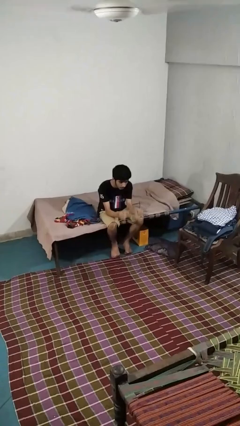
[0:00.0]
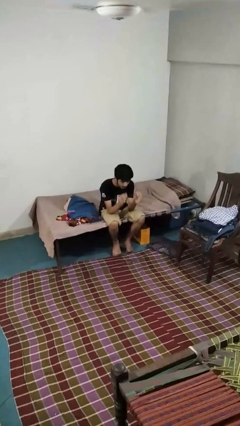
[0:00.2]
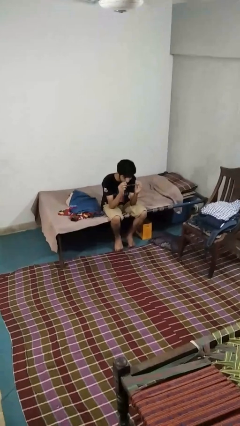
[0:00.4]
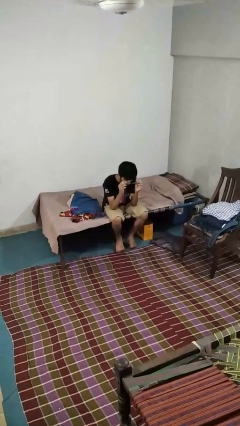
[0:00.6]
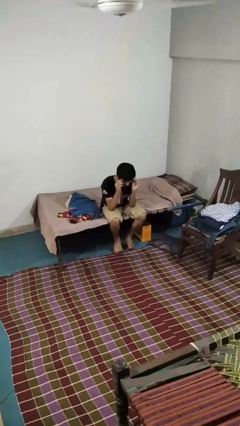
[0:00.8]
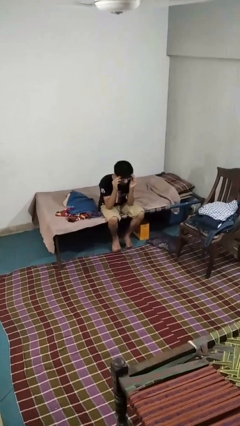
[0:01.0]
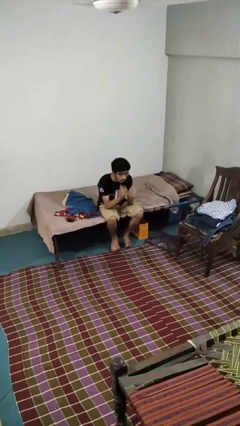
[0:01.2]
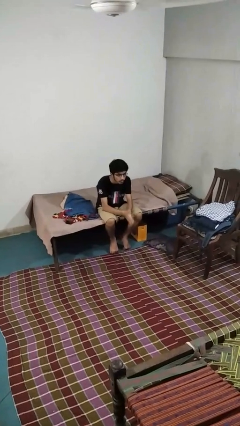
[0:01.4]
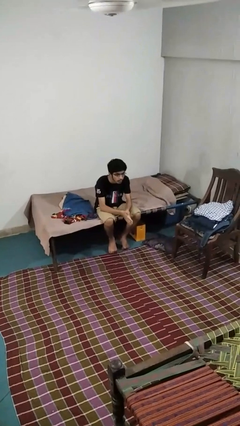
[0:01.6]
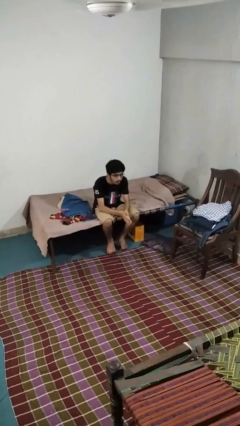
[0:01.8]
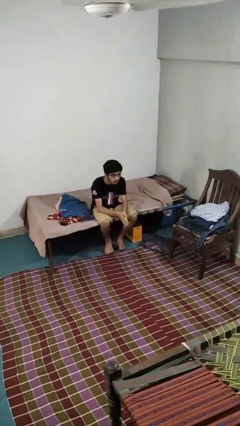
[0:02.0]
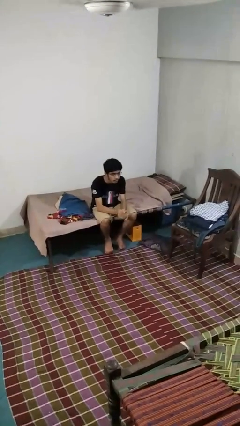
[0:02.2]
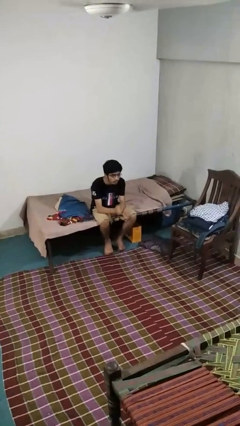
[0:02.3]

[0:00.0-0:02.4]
person puts on glasses

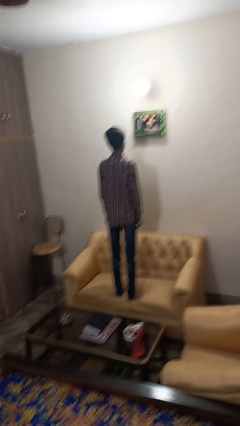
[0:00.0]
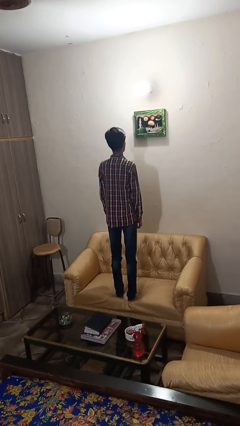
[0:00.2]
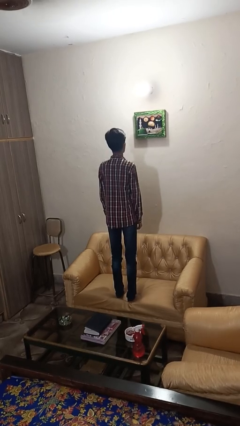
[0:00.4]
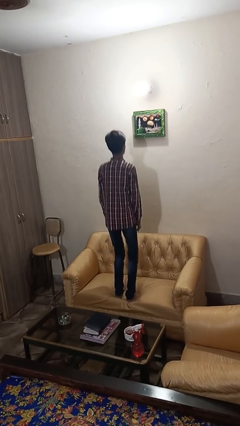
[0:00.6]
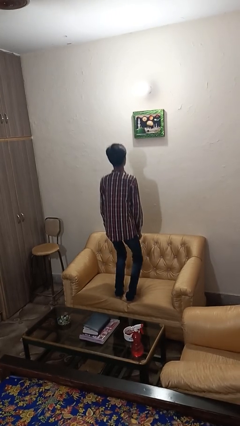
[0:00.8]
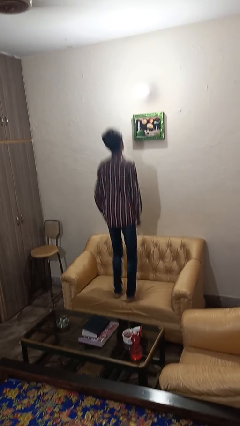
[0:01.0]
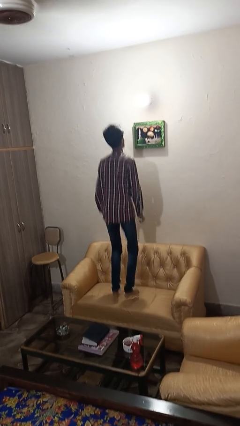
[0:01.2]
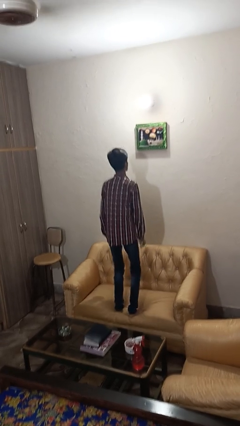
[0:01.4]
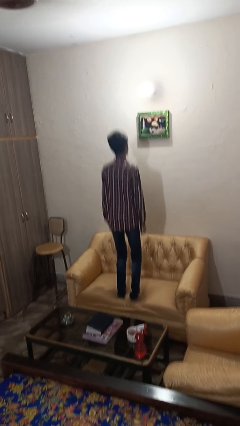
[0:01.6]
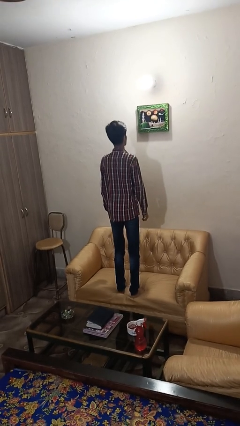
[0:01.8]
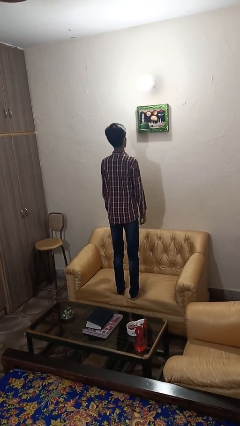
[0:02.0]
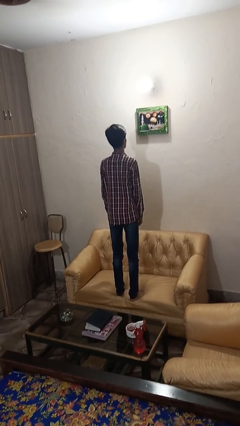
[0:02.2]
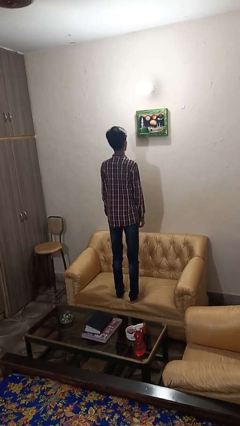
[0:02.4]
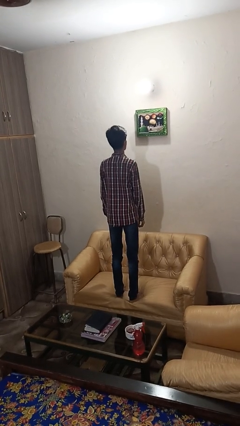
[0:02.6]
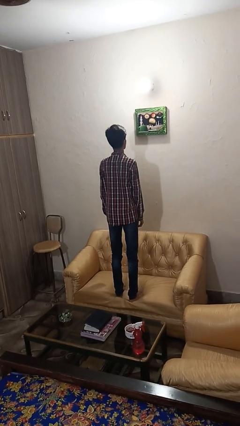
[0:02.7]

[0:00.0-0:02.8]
person jumps on couch

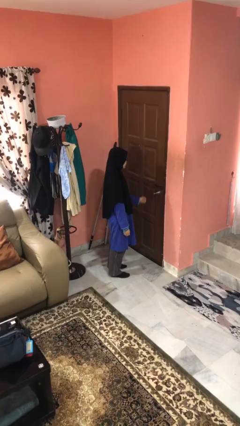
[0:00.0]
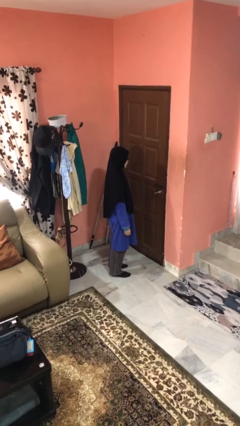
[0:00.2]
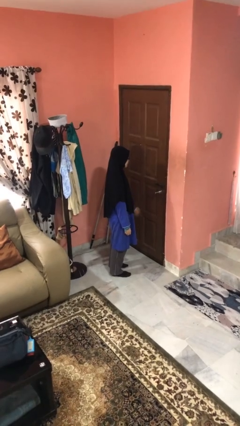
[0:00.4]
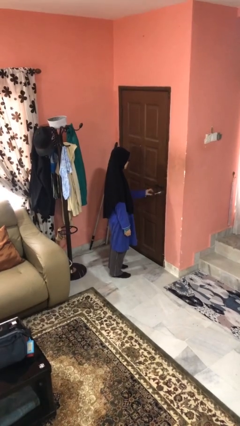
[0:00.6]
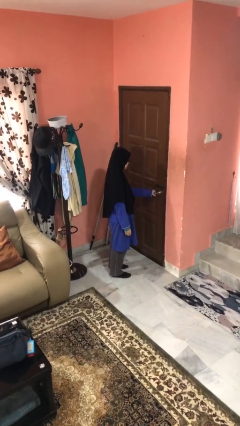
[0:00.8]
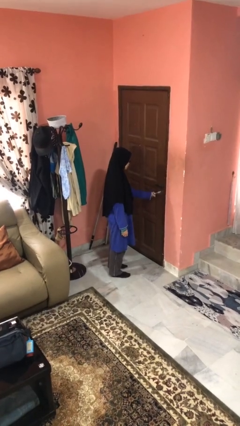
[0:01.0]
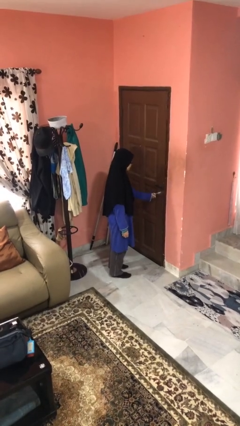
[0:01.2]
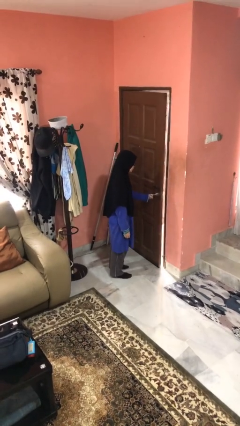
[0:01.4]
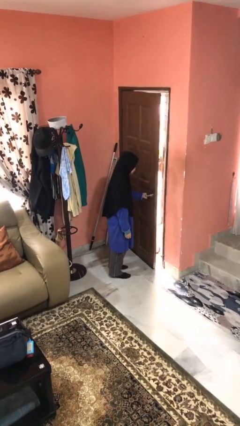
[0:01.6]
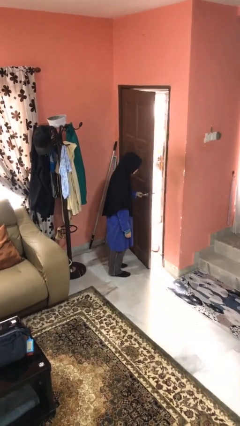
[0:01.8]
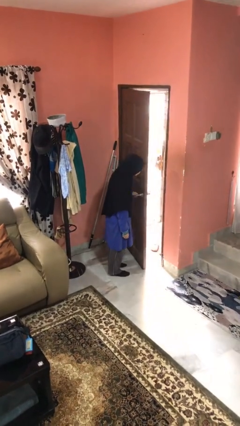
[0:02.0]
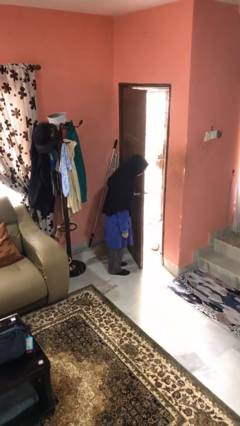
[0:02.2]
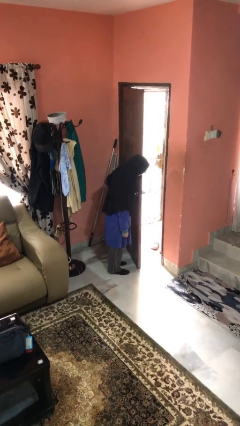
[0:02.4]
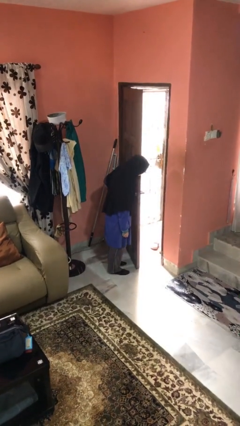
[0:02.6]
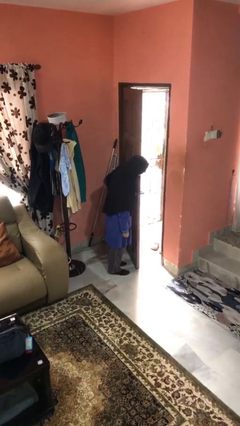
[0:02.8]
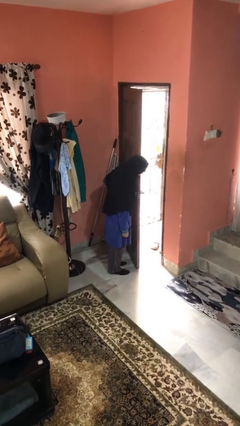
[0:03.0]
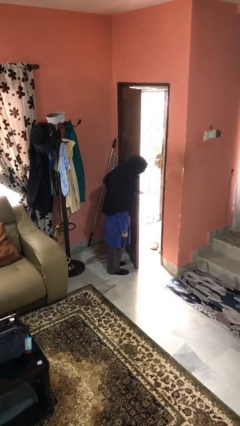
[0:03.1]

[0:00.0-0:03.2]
person opens facility door

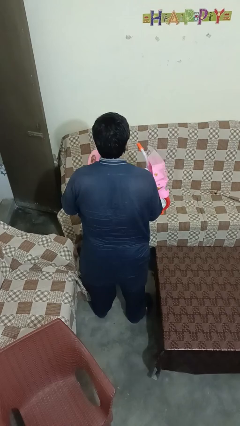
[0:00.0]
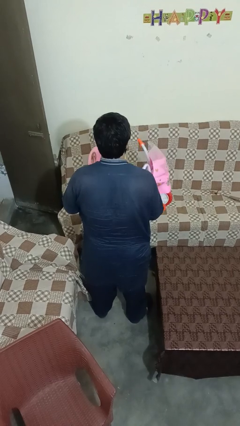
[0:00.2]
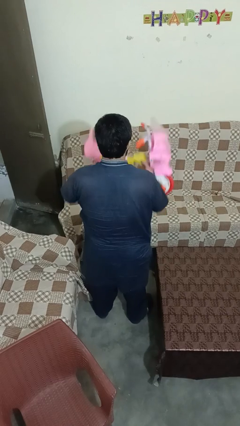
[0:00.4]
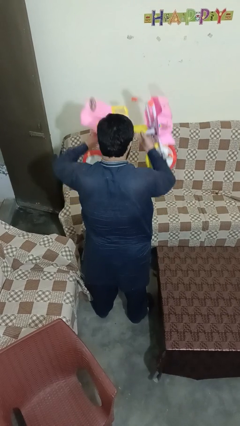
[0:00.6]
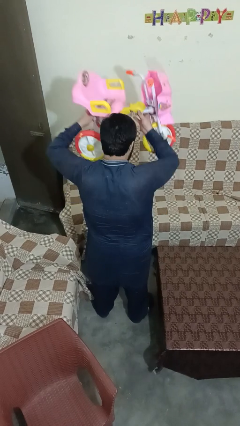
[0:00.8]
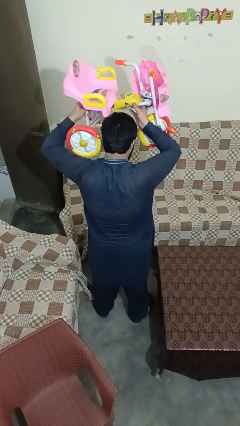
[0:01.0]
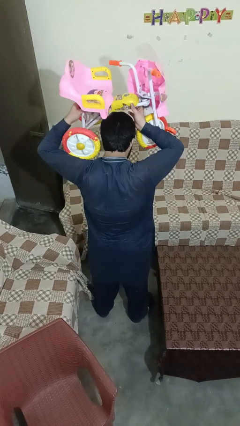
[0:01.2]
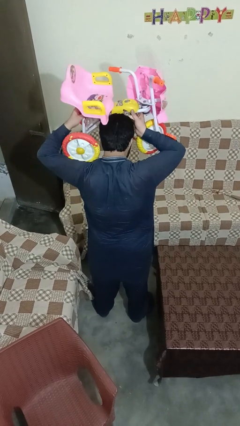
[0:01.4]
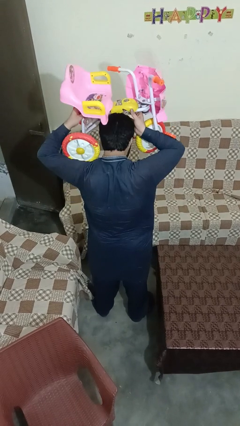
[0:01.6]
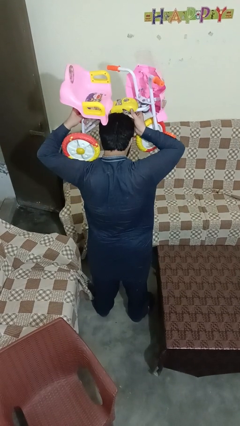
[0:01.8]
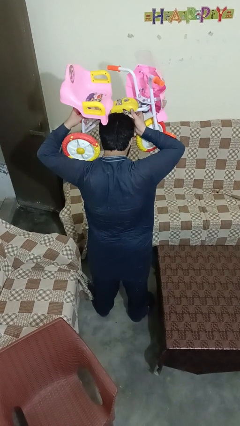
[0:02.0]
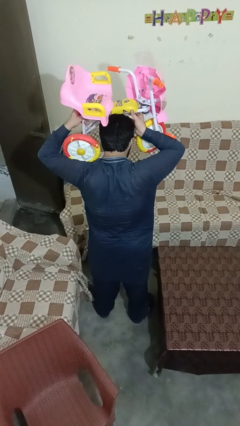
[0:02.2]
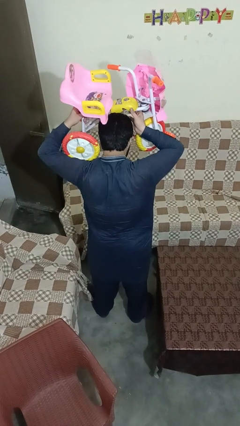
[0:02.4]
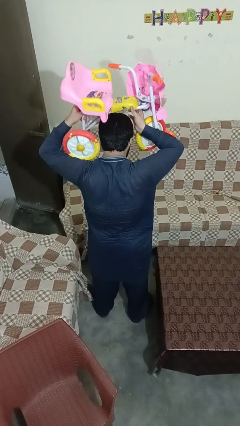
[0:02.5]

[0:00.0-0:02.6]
person holds object above head

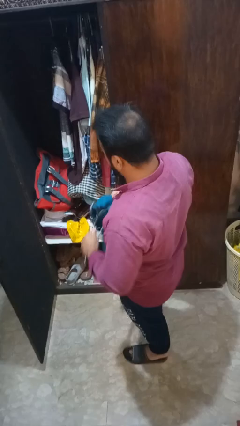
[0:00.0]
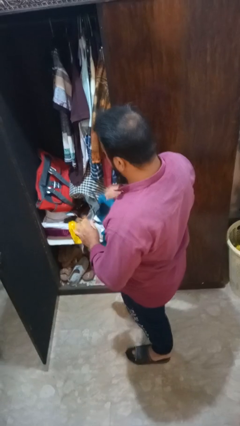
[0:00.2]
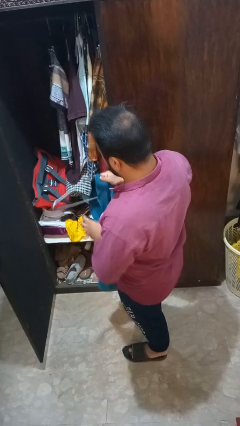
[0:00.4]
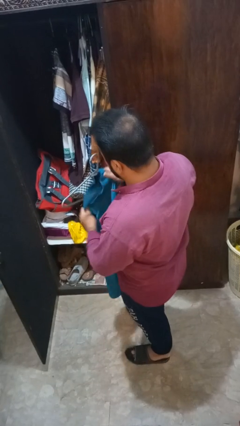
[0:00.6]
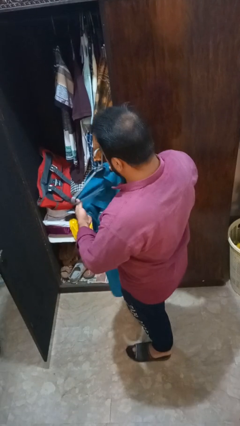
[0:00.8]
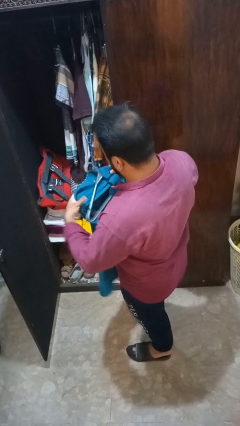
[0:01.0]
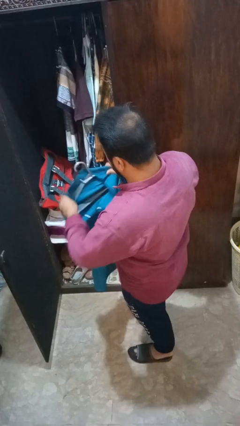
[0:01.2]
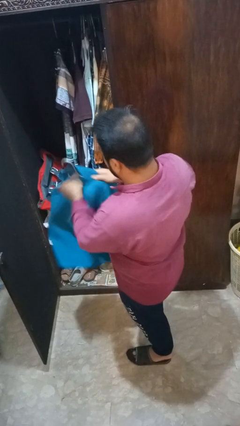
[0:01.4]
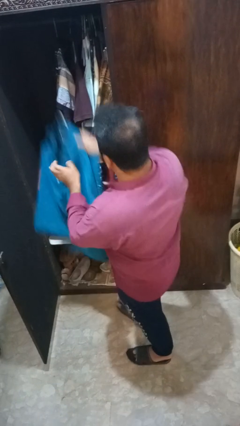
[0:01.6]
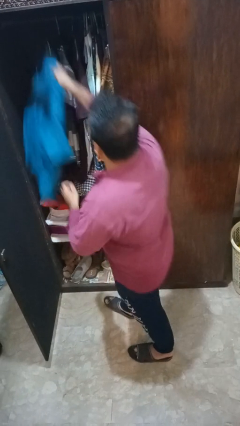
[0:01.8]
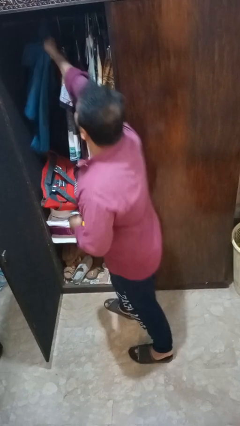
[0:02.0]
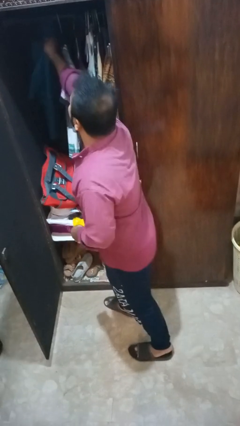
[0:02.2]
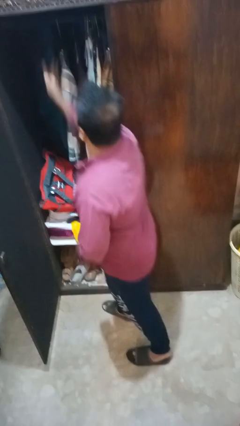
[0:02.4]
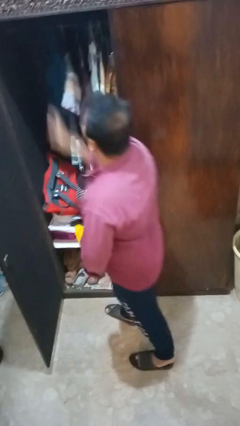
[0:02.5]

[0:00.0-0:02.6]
person puts clothes into closet

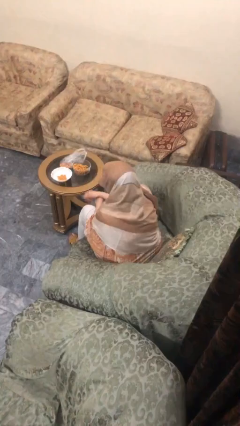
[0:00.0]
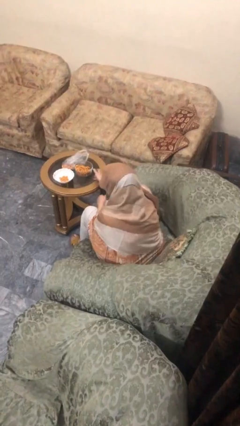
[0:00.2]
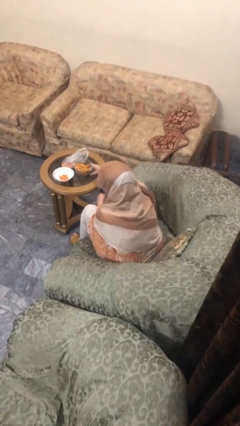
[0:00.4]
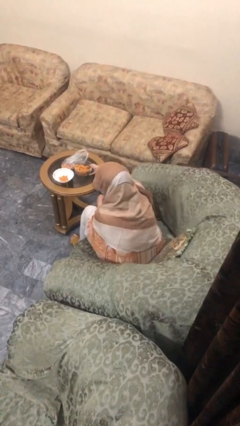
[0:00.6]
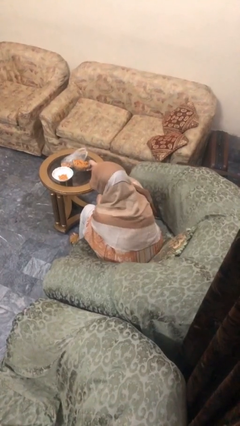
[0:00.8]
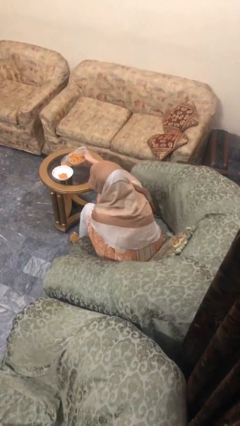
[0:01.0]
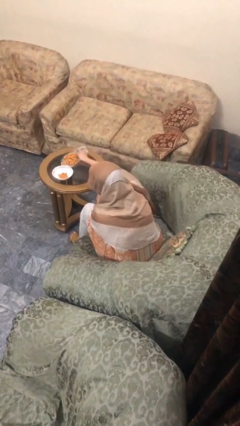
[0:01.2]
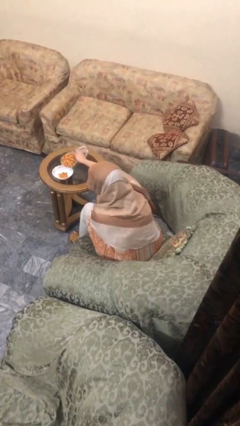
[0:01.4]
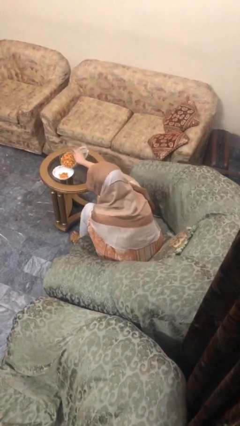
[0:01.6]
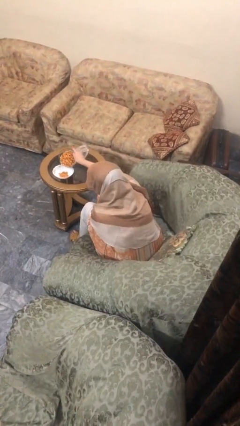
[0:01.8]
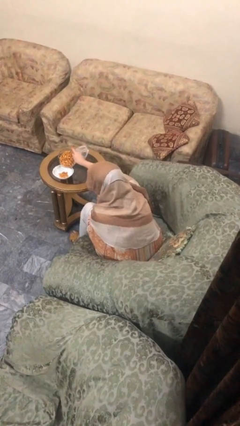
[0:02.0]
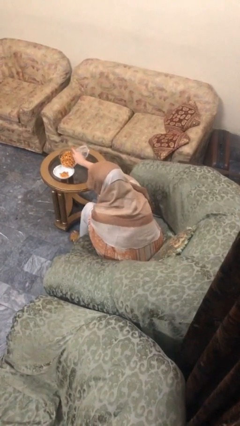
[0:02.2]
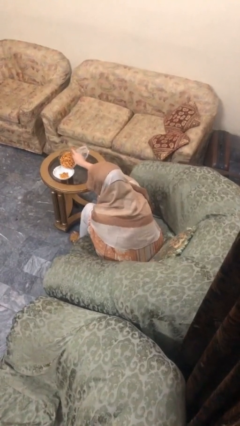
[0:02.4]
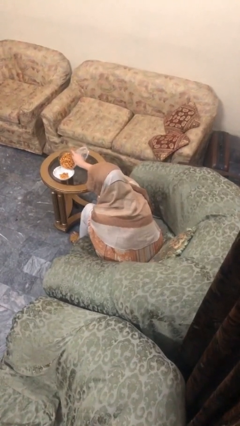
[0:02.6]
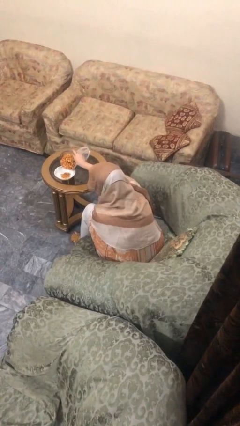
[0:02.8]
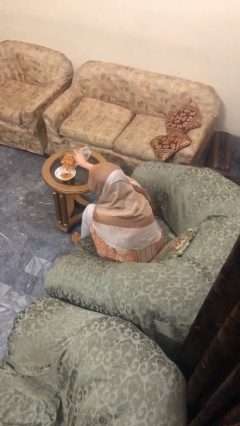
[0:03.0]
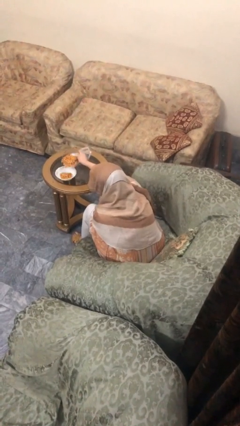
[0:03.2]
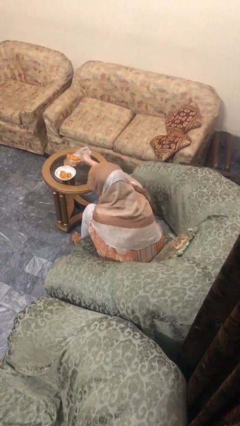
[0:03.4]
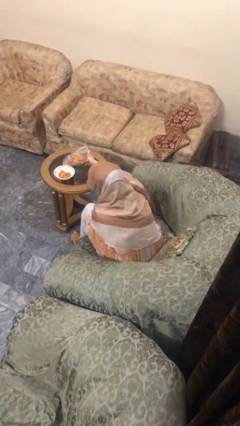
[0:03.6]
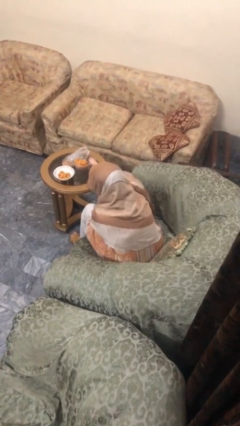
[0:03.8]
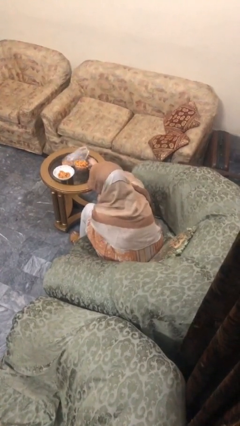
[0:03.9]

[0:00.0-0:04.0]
person pours into bowl
